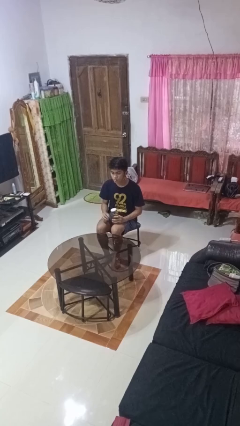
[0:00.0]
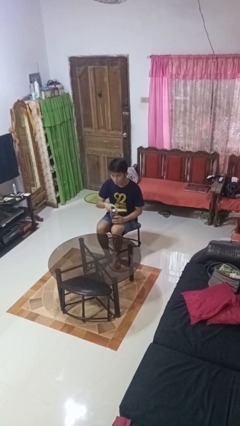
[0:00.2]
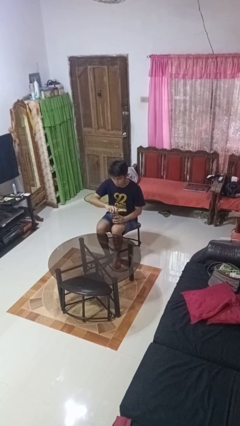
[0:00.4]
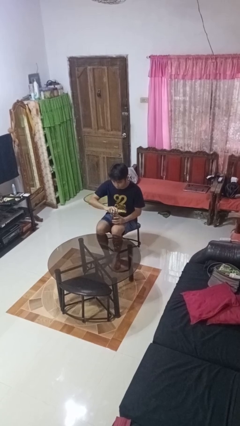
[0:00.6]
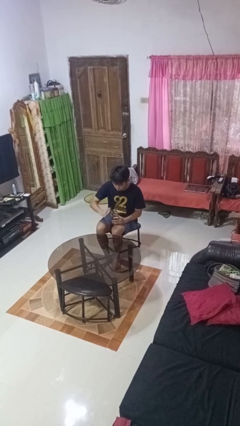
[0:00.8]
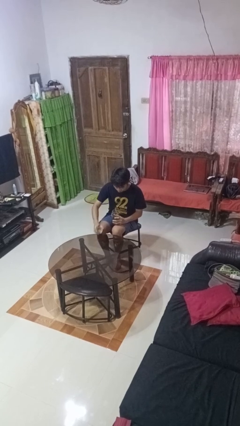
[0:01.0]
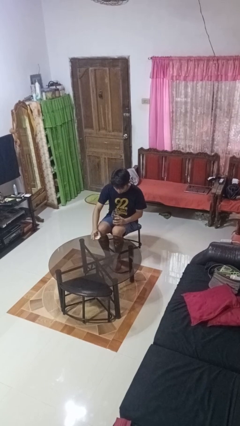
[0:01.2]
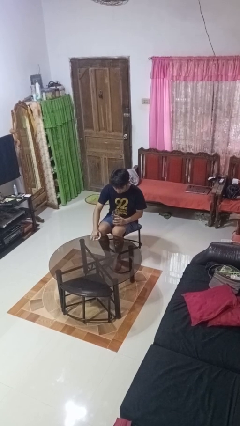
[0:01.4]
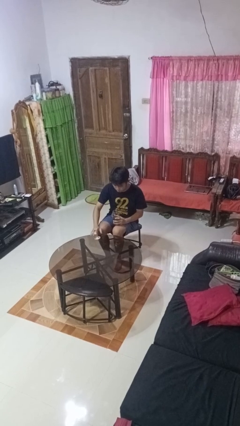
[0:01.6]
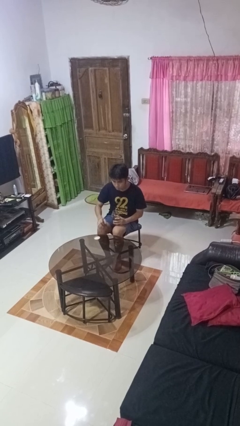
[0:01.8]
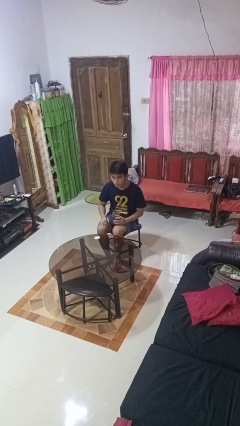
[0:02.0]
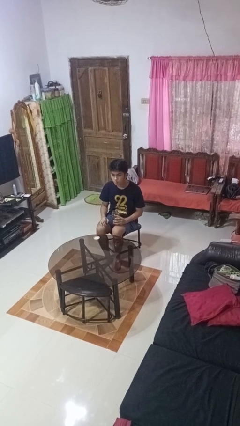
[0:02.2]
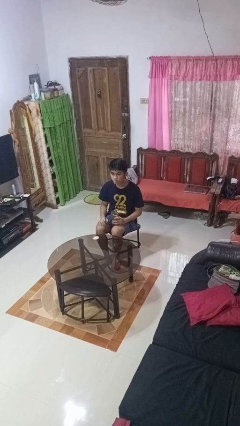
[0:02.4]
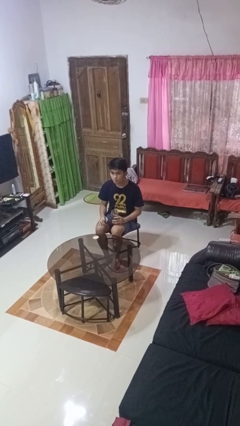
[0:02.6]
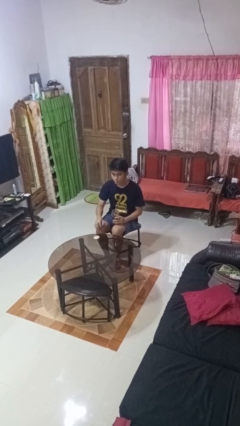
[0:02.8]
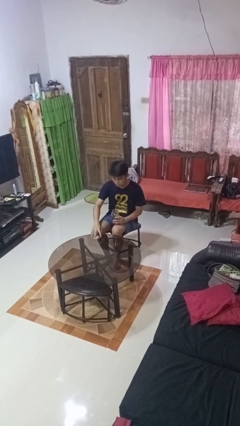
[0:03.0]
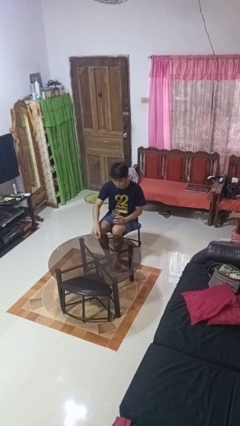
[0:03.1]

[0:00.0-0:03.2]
person opens jar

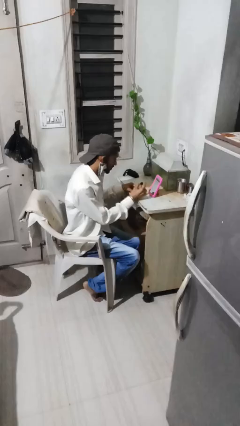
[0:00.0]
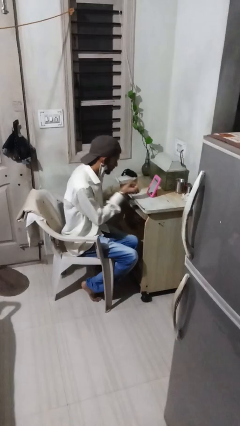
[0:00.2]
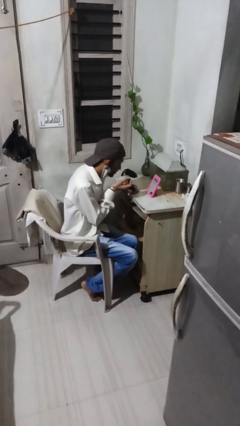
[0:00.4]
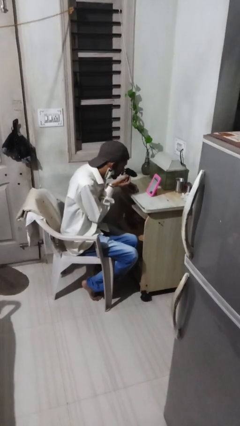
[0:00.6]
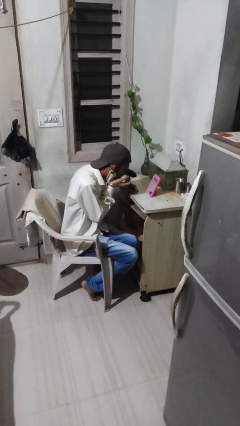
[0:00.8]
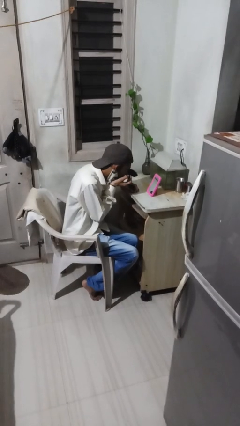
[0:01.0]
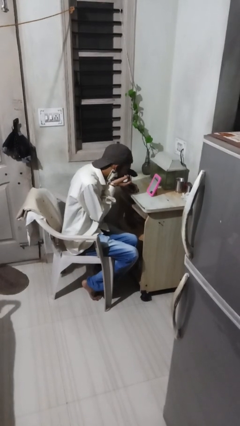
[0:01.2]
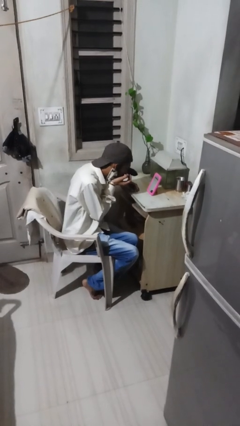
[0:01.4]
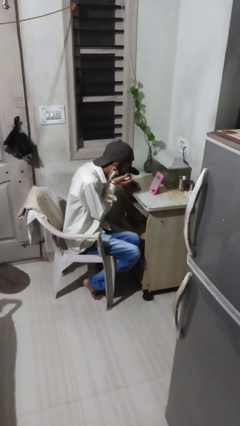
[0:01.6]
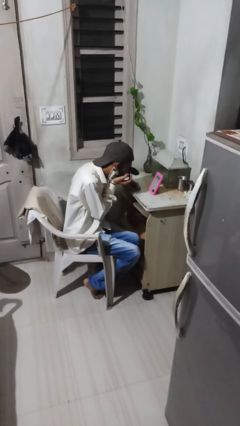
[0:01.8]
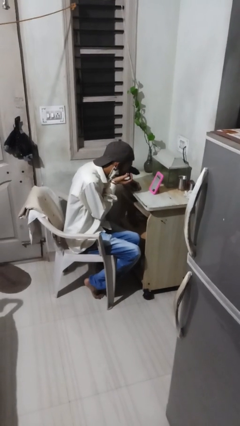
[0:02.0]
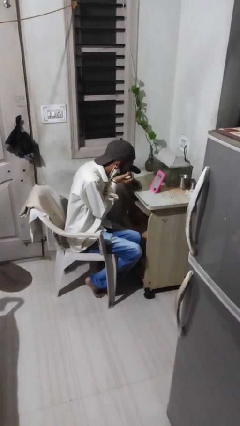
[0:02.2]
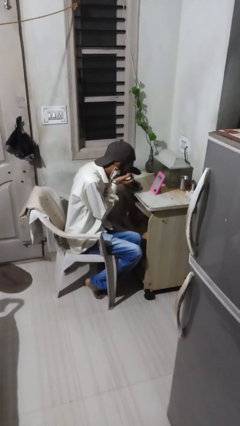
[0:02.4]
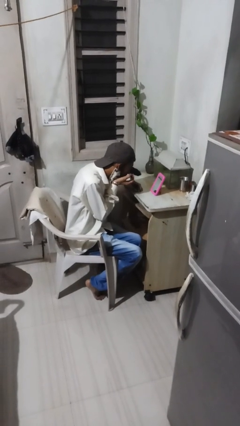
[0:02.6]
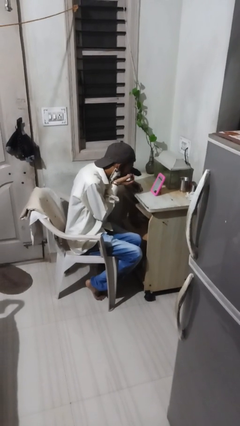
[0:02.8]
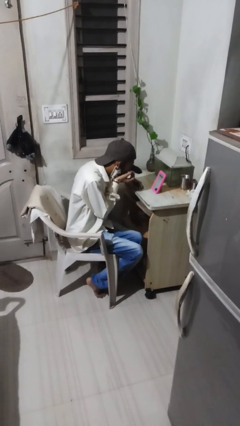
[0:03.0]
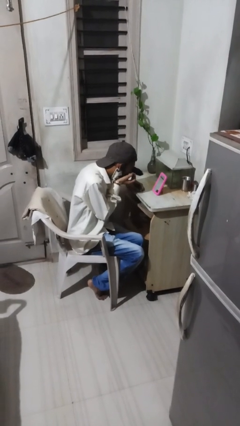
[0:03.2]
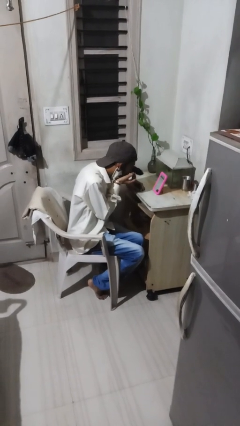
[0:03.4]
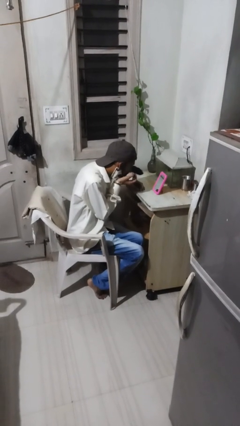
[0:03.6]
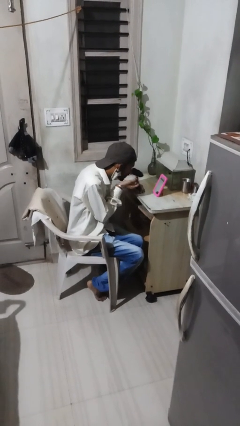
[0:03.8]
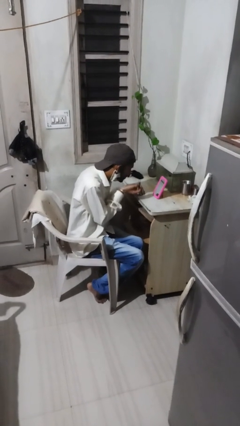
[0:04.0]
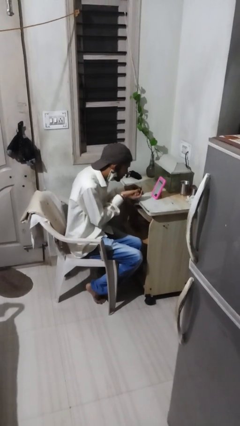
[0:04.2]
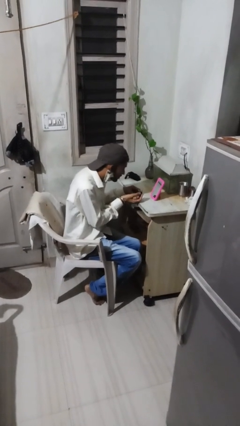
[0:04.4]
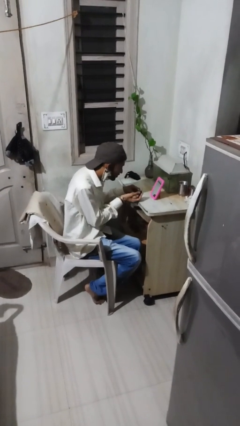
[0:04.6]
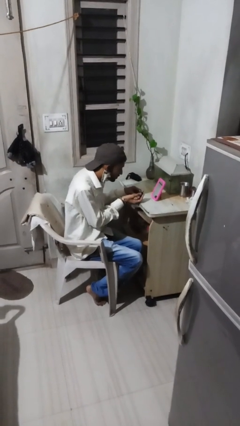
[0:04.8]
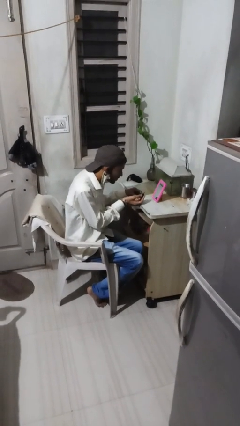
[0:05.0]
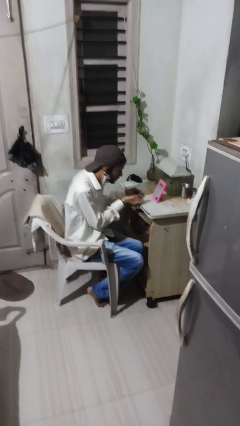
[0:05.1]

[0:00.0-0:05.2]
person applies eye makeup

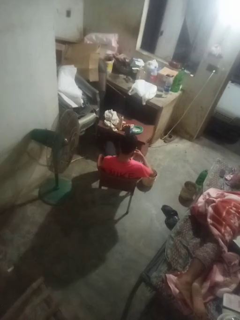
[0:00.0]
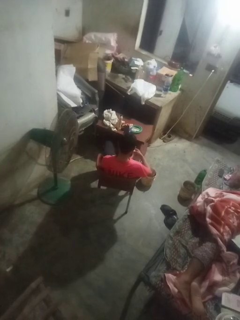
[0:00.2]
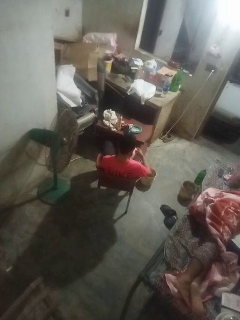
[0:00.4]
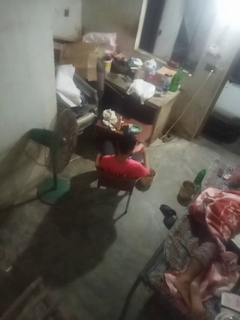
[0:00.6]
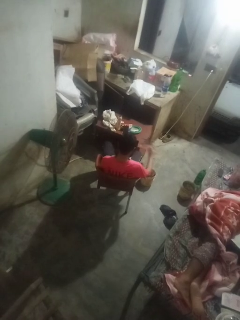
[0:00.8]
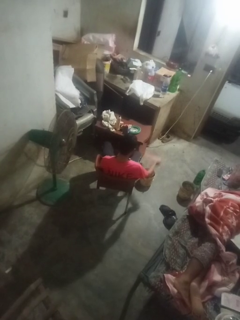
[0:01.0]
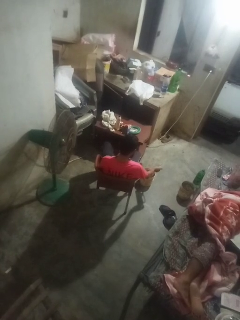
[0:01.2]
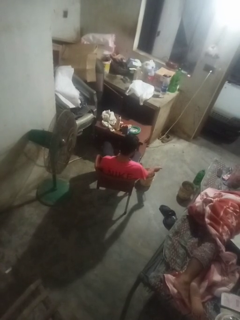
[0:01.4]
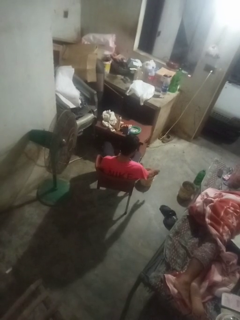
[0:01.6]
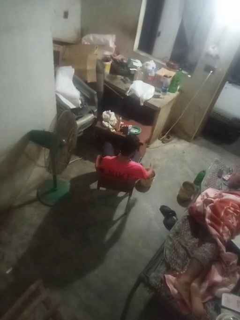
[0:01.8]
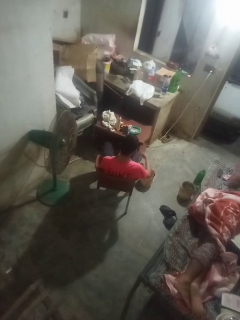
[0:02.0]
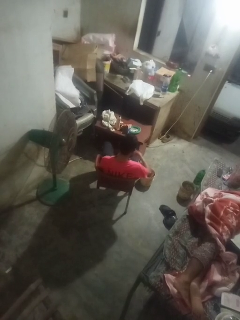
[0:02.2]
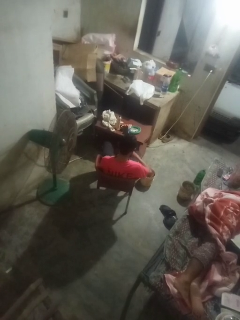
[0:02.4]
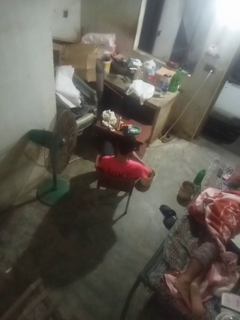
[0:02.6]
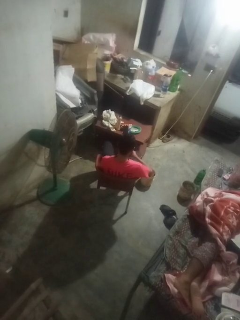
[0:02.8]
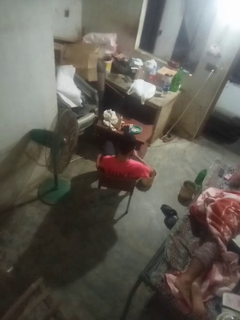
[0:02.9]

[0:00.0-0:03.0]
person discards trash

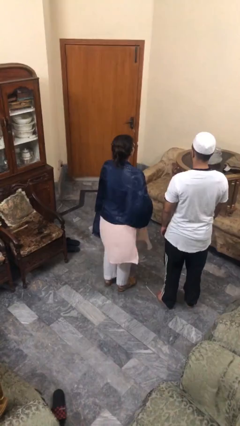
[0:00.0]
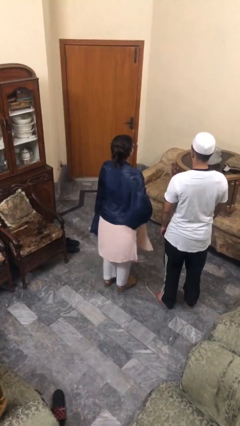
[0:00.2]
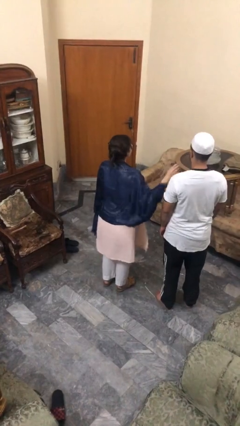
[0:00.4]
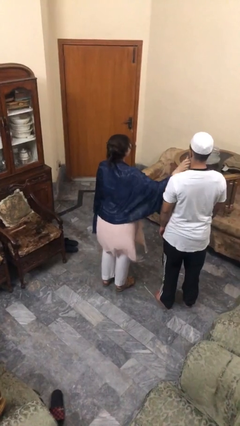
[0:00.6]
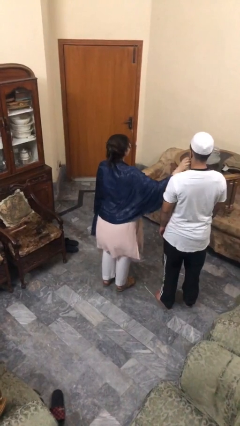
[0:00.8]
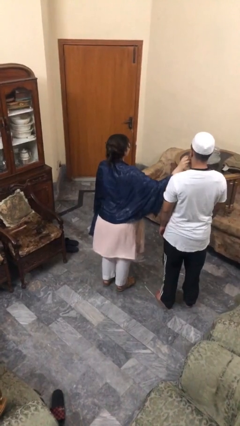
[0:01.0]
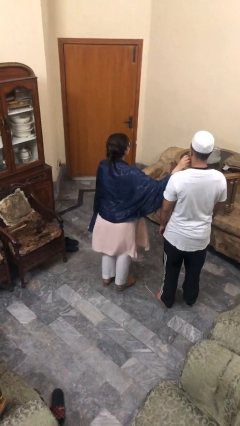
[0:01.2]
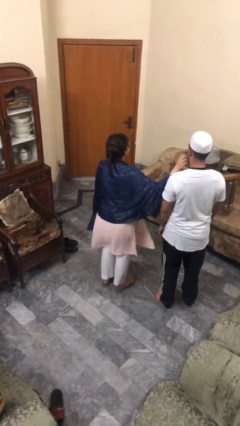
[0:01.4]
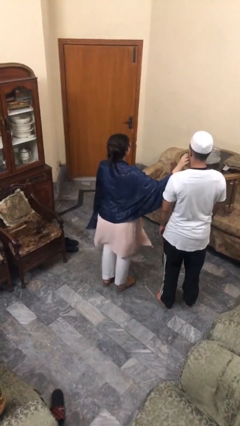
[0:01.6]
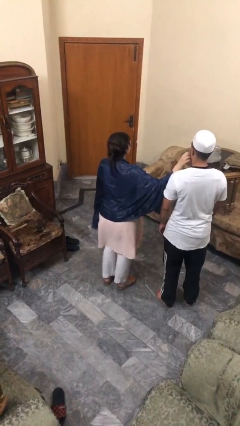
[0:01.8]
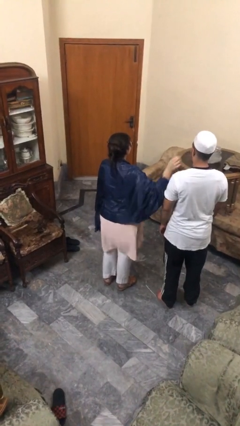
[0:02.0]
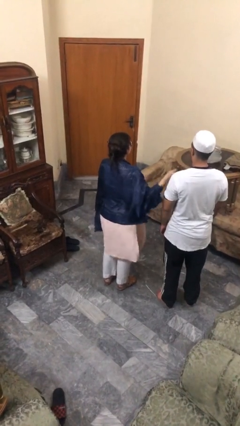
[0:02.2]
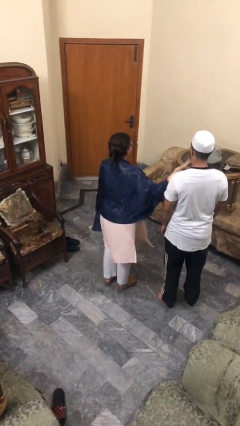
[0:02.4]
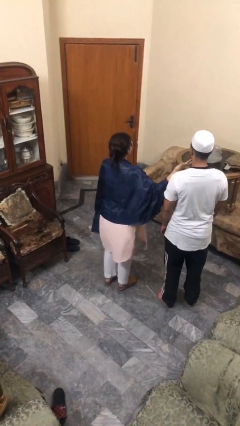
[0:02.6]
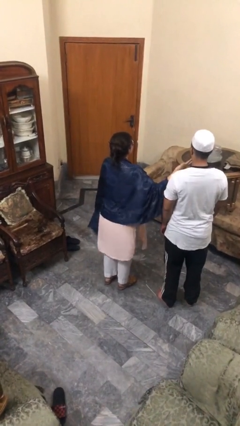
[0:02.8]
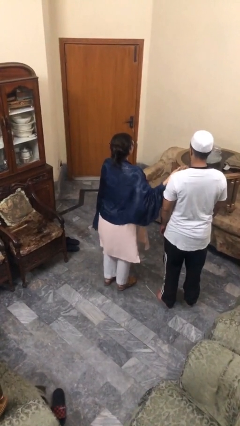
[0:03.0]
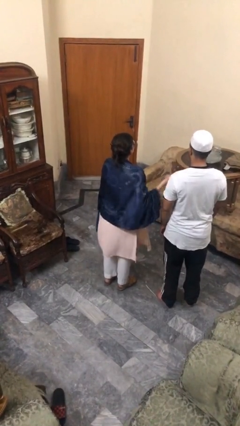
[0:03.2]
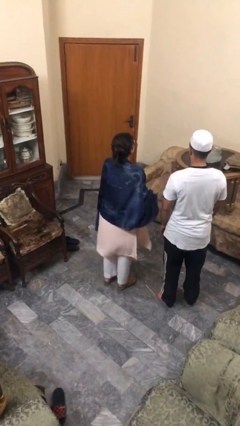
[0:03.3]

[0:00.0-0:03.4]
person touches face of person

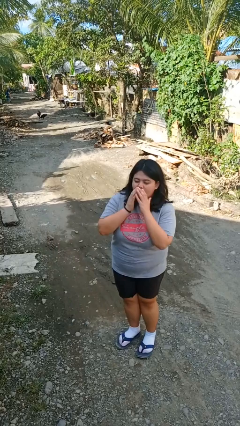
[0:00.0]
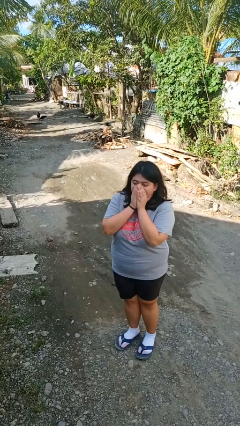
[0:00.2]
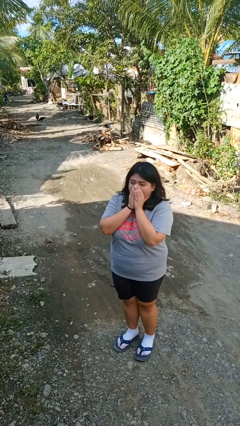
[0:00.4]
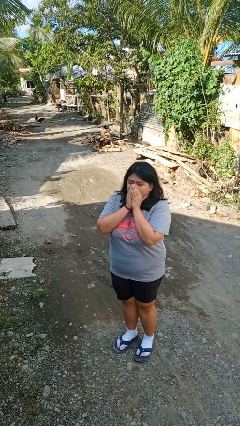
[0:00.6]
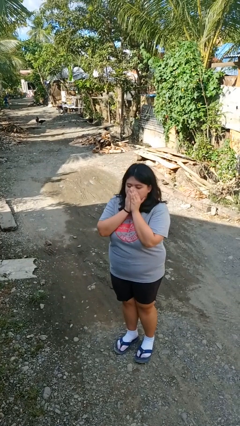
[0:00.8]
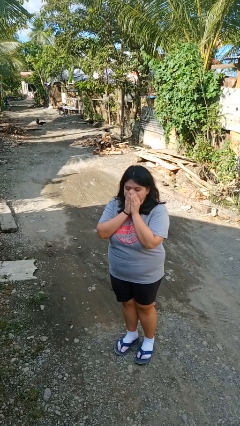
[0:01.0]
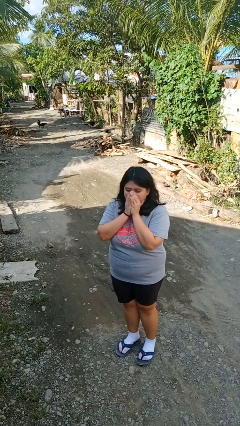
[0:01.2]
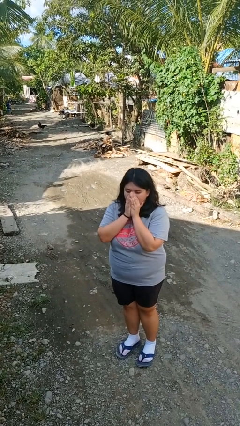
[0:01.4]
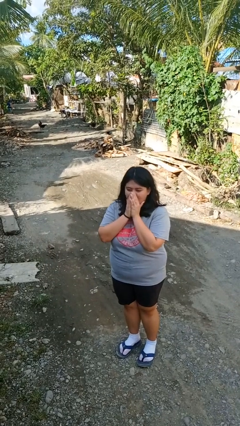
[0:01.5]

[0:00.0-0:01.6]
person blows into hands

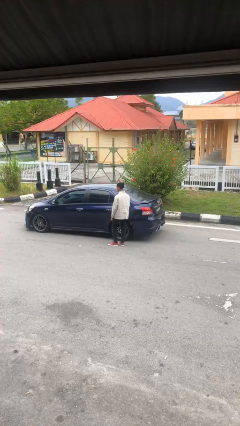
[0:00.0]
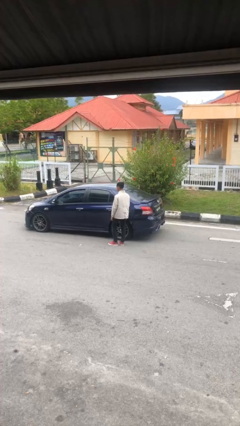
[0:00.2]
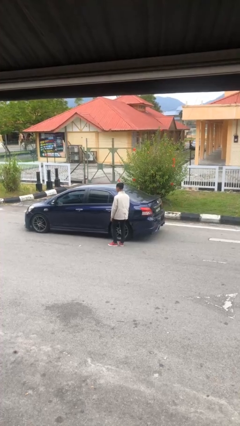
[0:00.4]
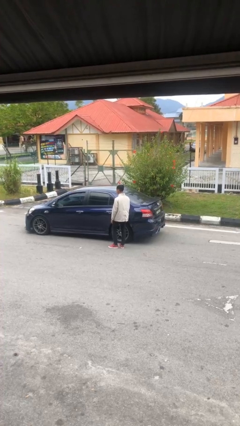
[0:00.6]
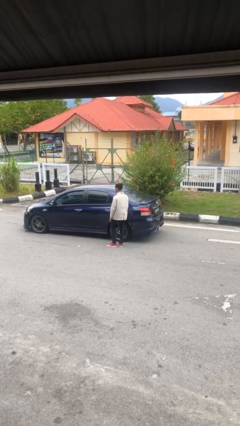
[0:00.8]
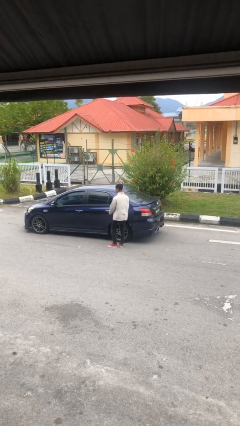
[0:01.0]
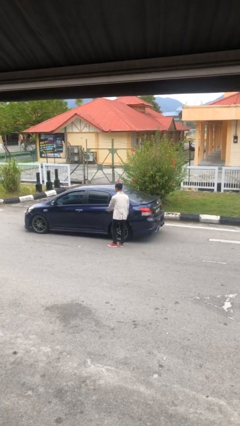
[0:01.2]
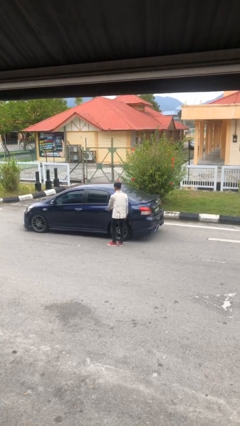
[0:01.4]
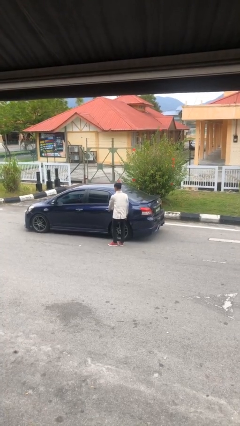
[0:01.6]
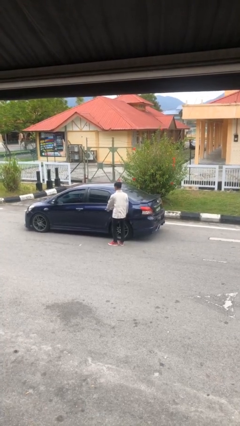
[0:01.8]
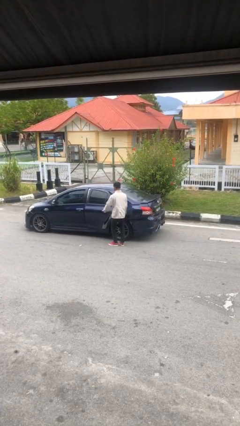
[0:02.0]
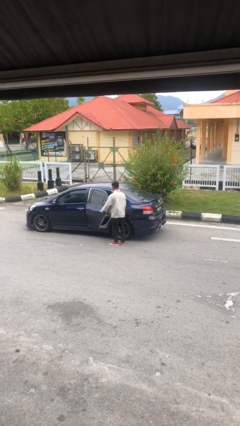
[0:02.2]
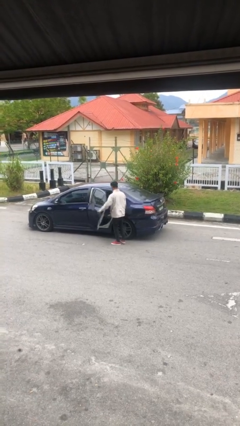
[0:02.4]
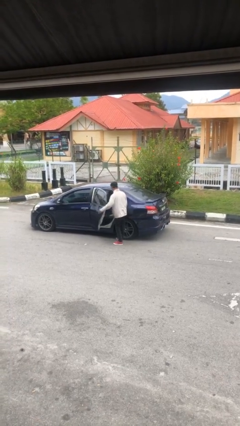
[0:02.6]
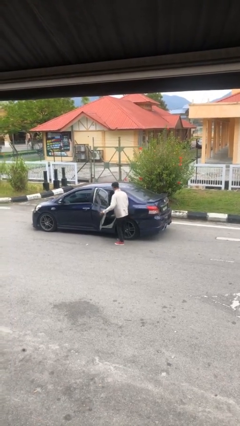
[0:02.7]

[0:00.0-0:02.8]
person opens car door